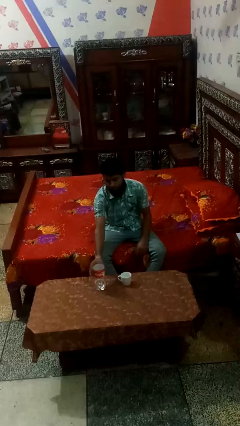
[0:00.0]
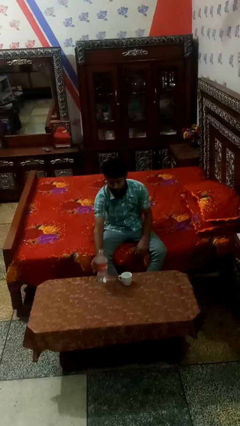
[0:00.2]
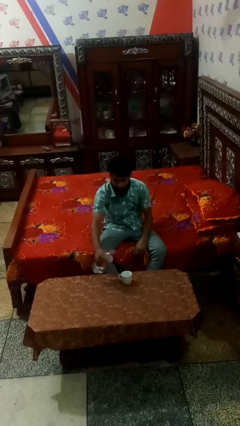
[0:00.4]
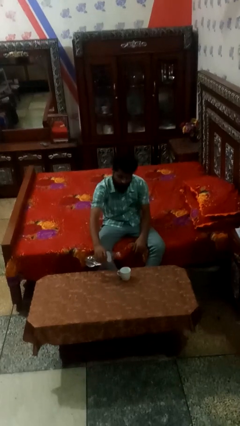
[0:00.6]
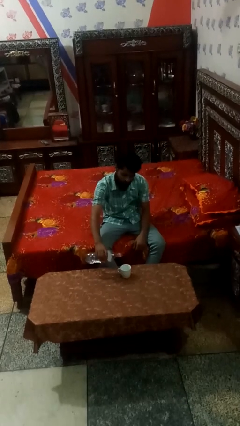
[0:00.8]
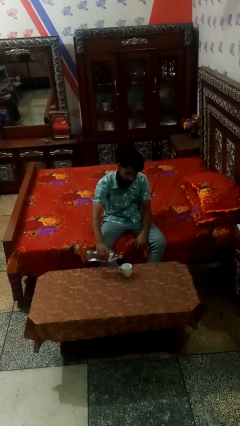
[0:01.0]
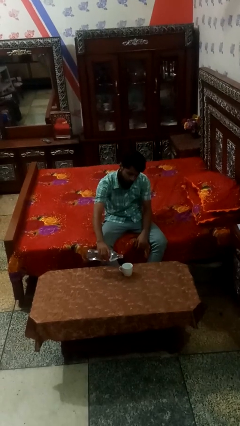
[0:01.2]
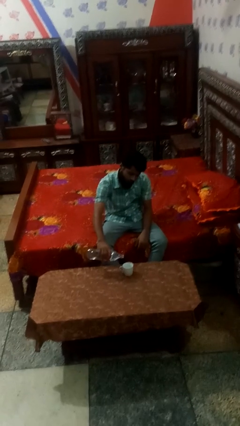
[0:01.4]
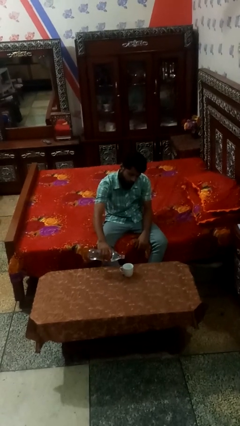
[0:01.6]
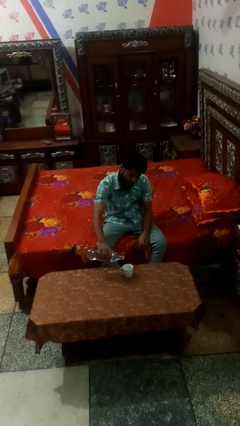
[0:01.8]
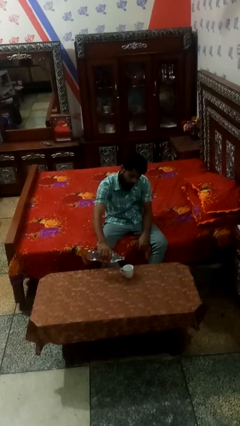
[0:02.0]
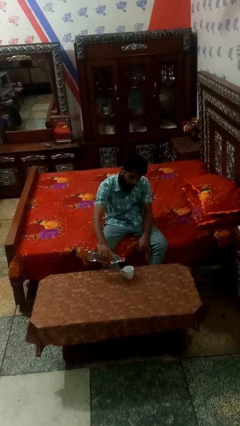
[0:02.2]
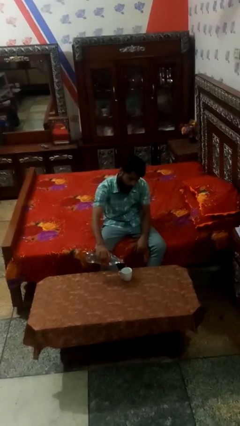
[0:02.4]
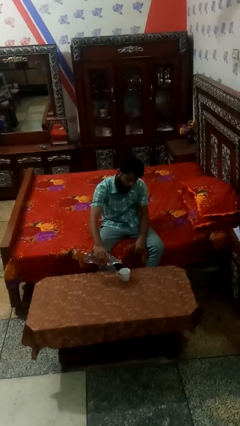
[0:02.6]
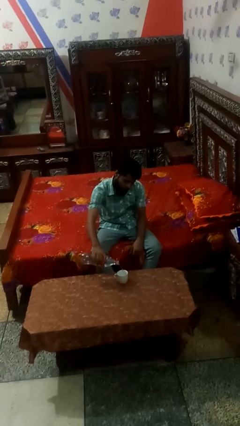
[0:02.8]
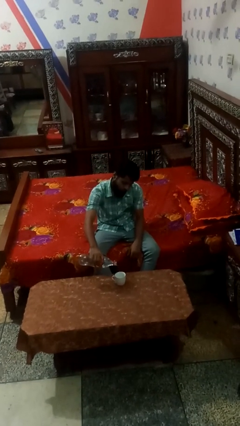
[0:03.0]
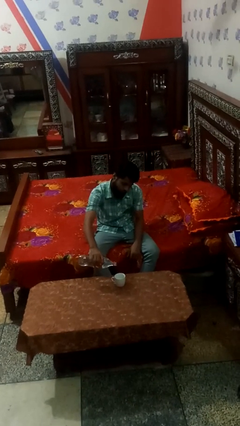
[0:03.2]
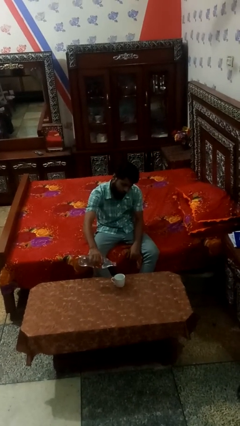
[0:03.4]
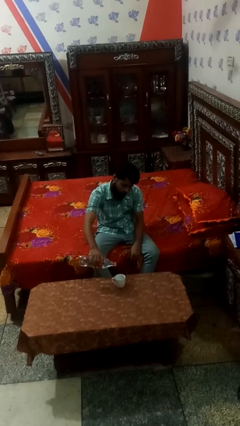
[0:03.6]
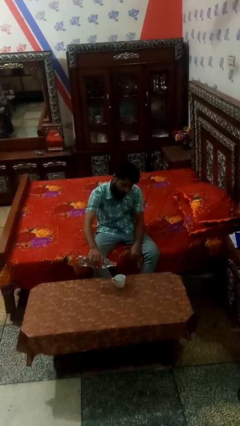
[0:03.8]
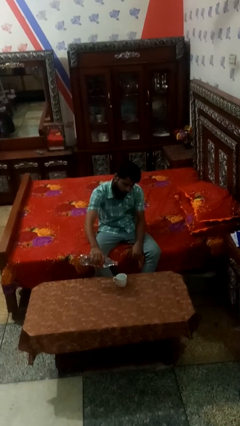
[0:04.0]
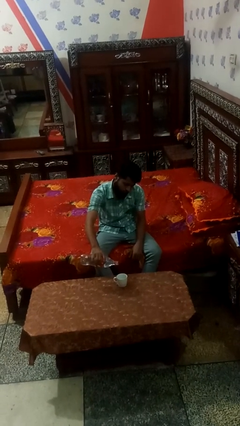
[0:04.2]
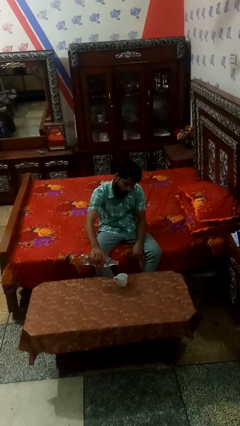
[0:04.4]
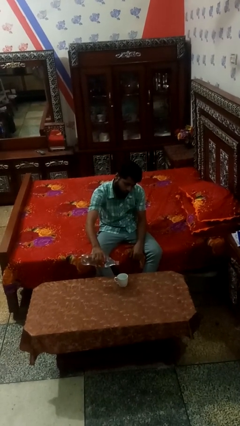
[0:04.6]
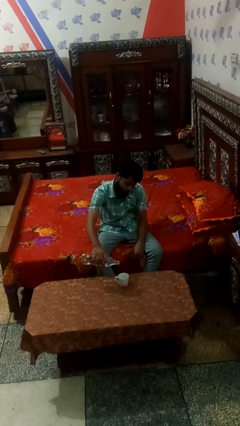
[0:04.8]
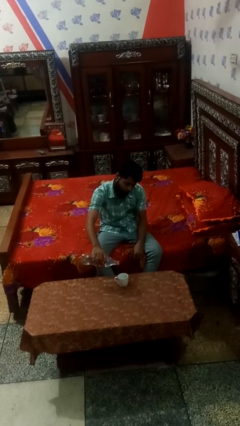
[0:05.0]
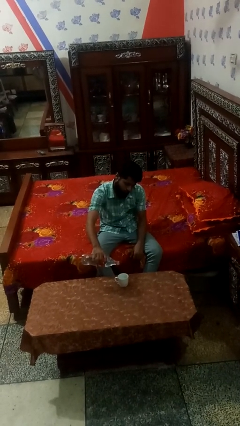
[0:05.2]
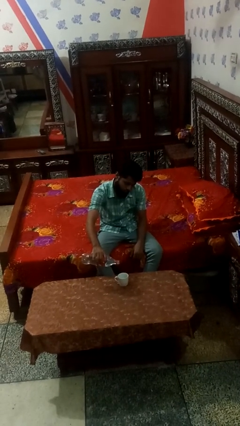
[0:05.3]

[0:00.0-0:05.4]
person pours liquid into cup

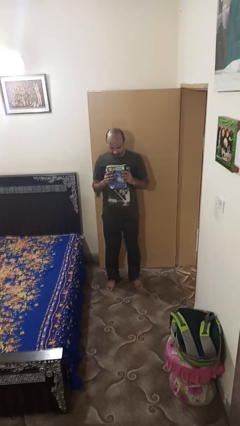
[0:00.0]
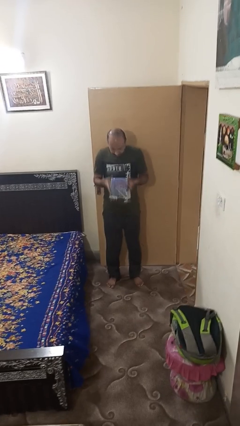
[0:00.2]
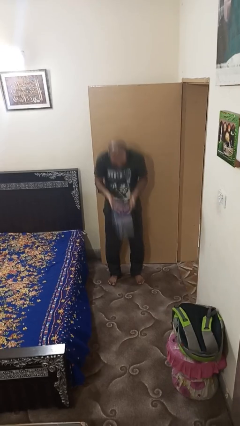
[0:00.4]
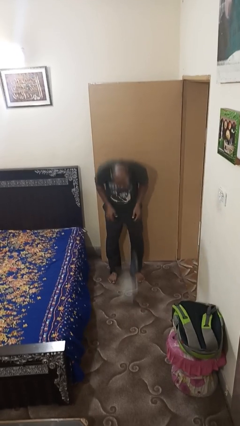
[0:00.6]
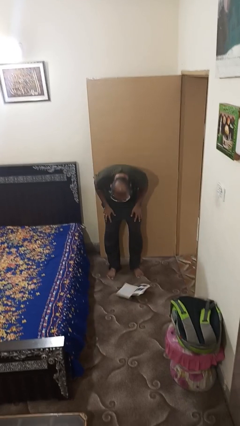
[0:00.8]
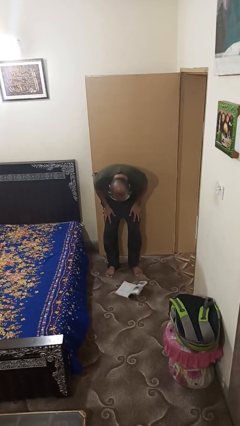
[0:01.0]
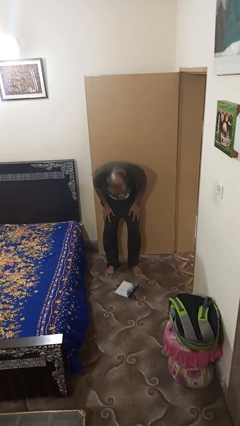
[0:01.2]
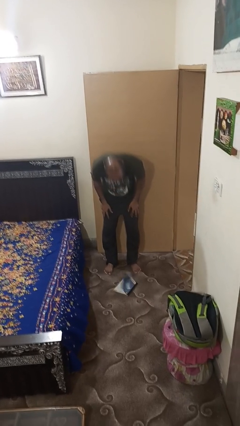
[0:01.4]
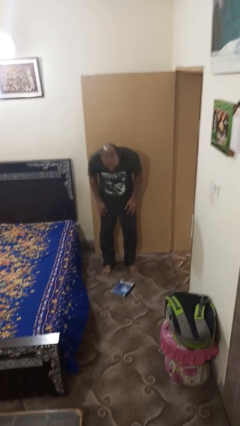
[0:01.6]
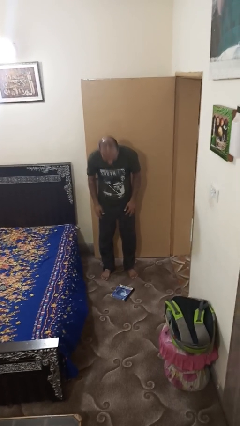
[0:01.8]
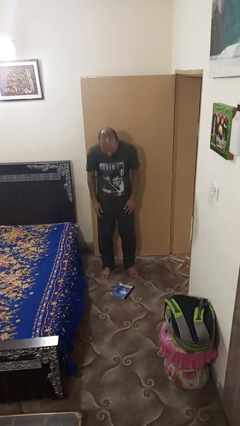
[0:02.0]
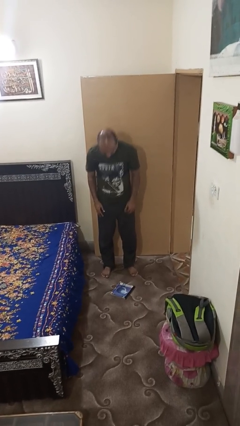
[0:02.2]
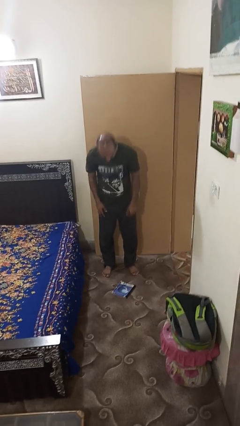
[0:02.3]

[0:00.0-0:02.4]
person drops object

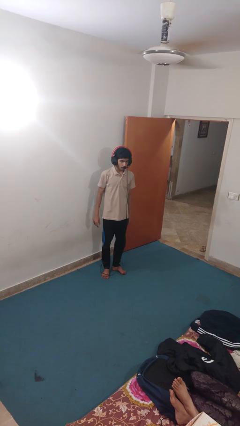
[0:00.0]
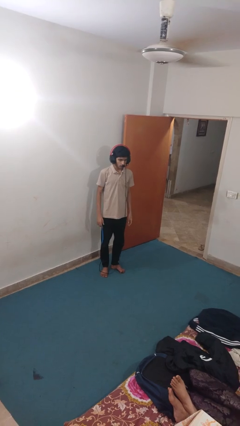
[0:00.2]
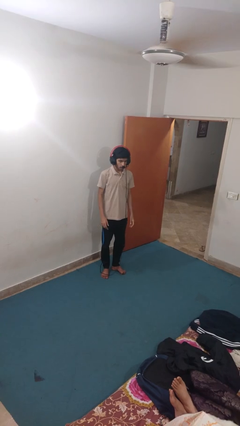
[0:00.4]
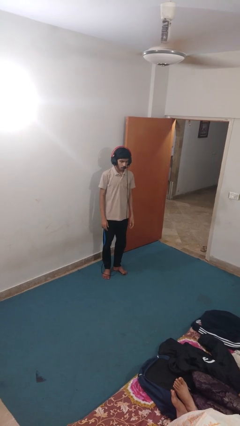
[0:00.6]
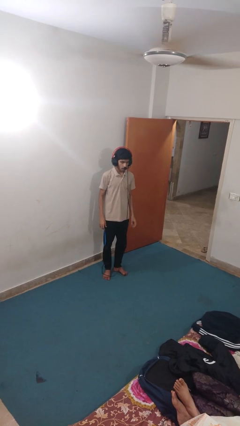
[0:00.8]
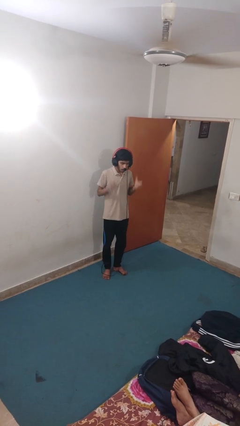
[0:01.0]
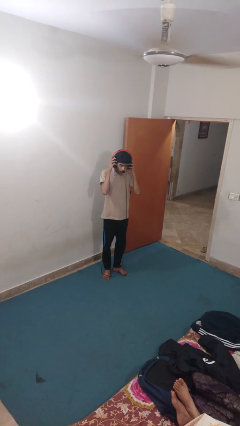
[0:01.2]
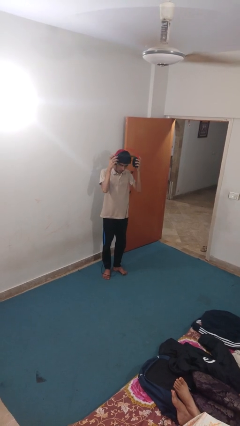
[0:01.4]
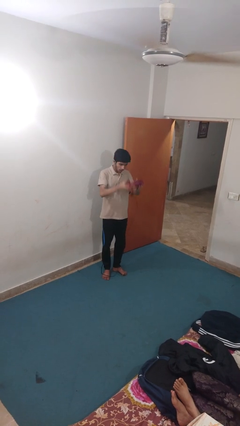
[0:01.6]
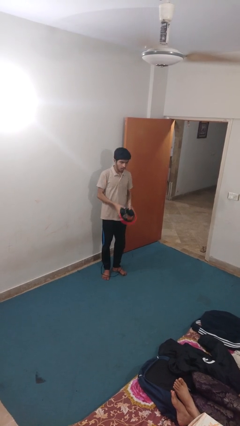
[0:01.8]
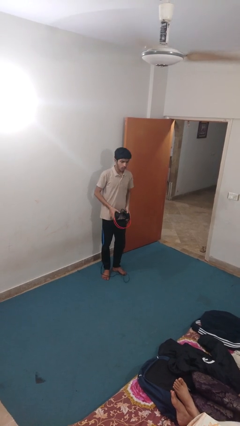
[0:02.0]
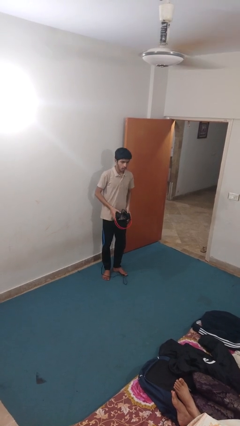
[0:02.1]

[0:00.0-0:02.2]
person takes off headphones

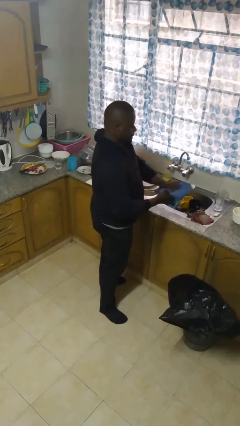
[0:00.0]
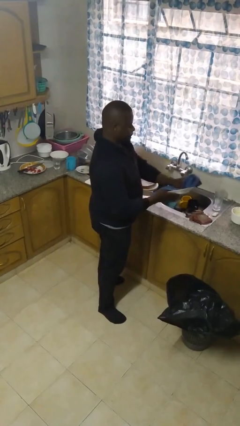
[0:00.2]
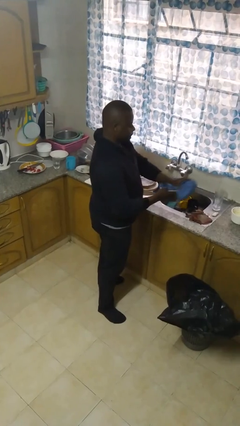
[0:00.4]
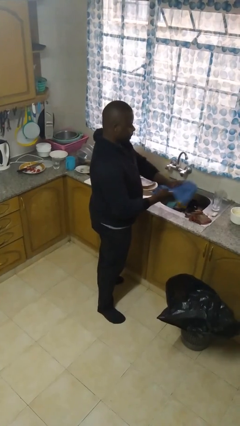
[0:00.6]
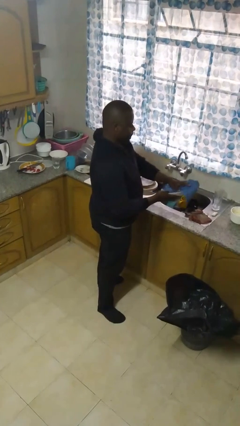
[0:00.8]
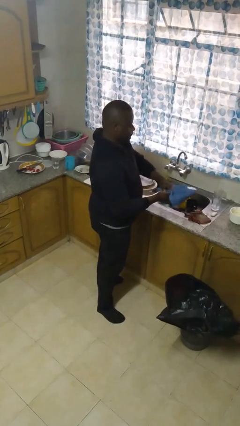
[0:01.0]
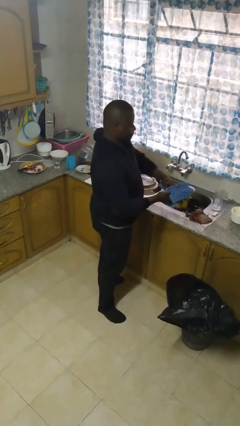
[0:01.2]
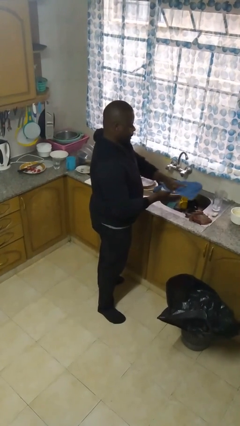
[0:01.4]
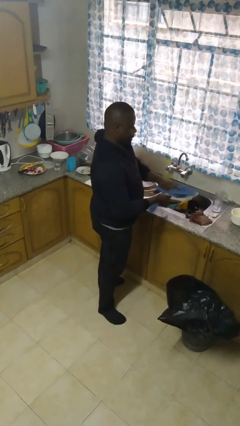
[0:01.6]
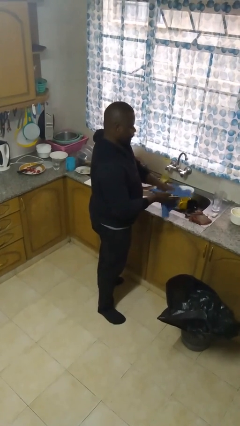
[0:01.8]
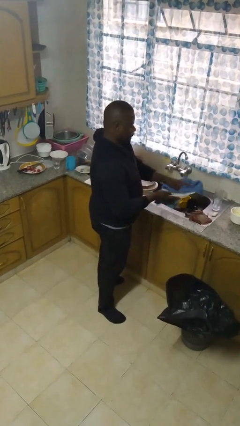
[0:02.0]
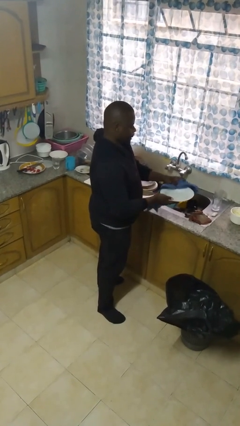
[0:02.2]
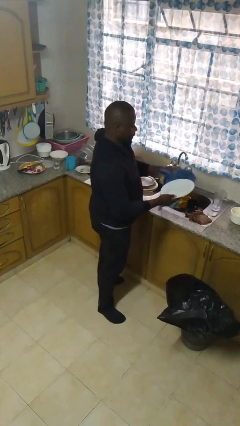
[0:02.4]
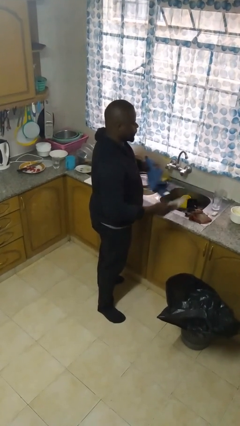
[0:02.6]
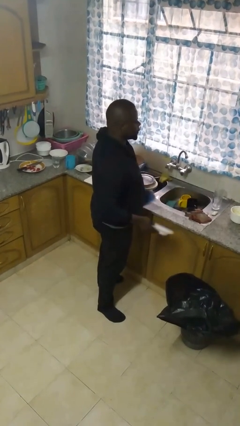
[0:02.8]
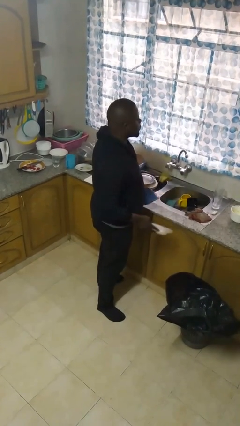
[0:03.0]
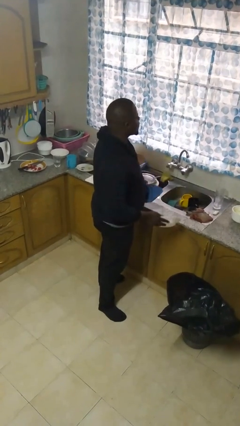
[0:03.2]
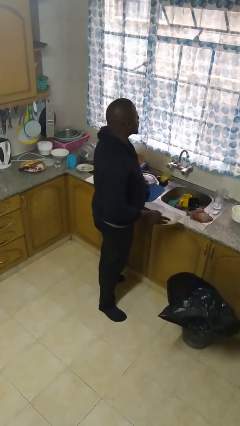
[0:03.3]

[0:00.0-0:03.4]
person dries dish

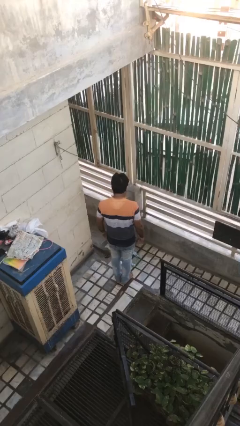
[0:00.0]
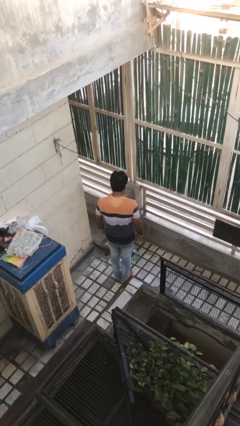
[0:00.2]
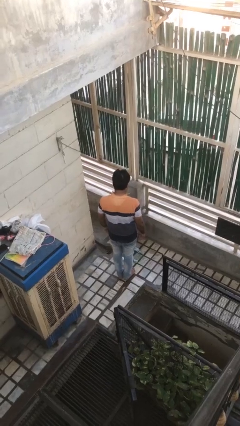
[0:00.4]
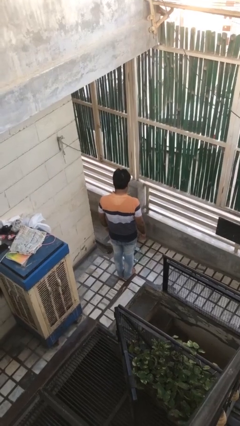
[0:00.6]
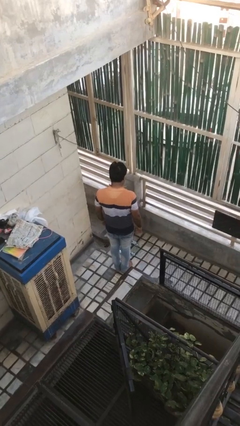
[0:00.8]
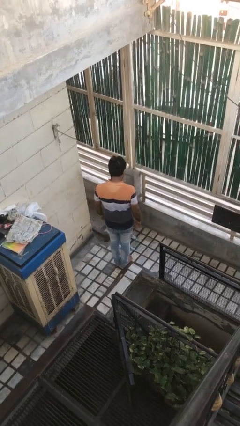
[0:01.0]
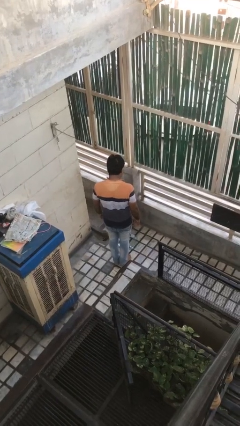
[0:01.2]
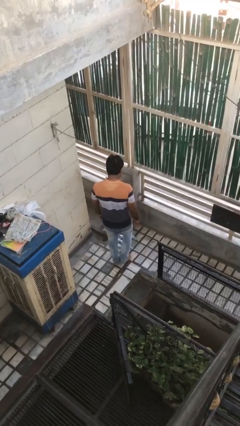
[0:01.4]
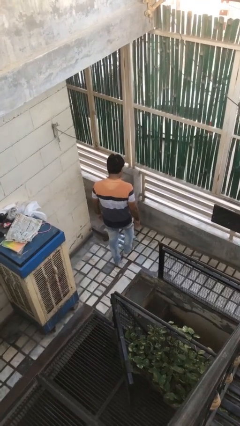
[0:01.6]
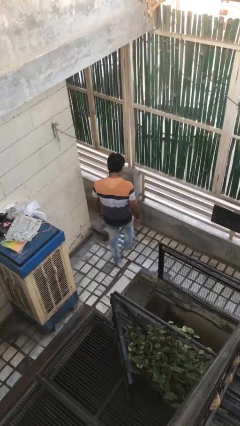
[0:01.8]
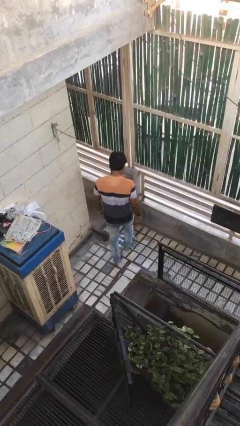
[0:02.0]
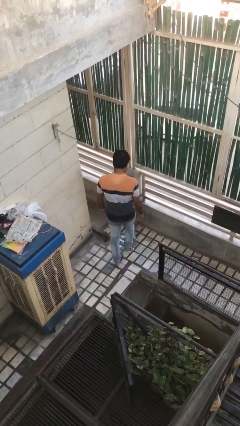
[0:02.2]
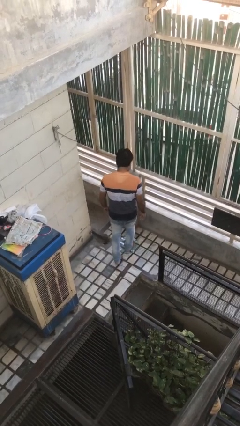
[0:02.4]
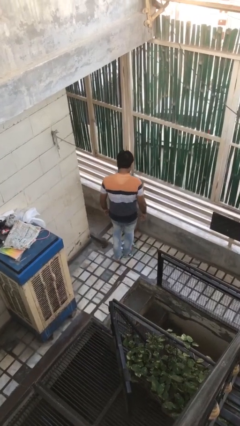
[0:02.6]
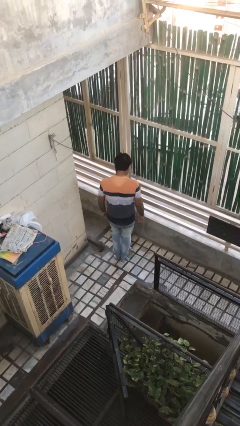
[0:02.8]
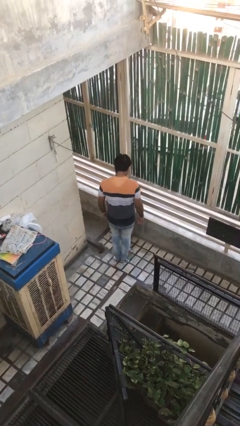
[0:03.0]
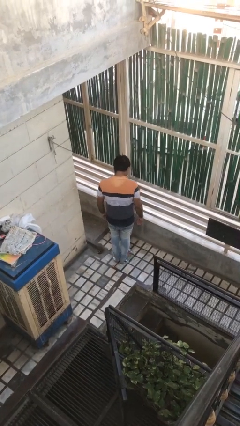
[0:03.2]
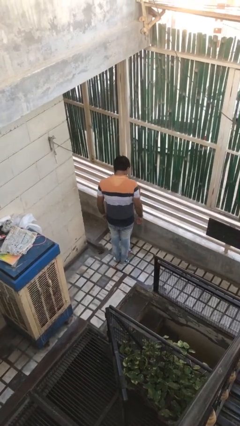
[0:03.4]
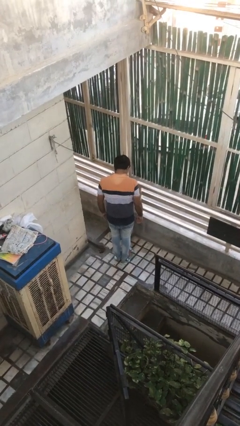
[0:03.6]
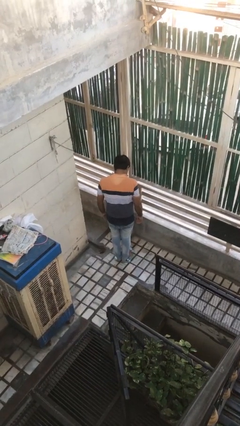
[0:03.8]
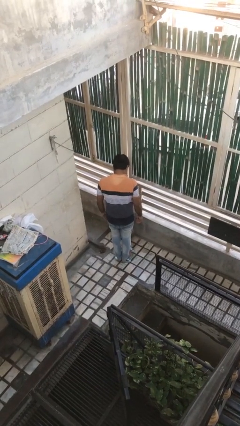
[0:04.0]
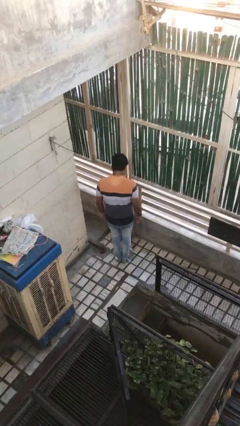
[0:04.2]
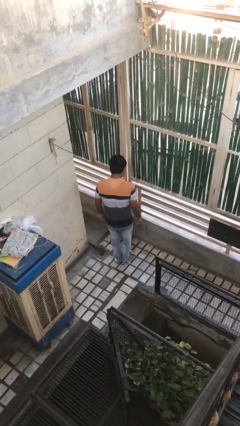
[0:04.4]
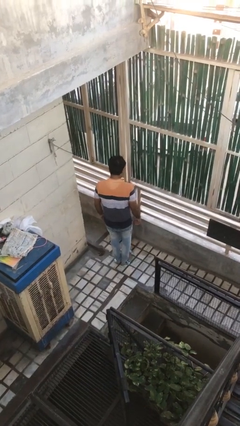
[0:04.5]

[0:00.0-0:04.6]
person uses bodyweight scale
